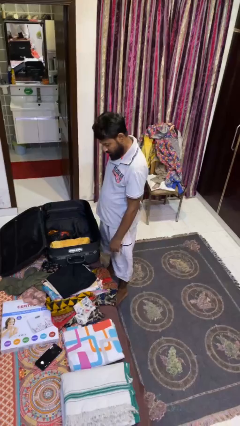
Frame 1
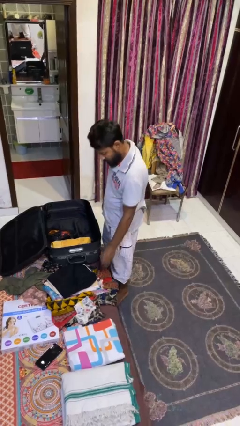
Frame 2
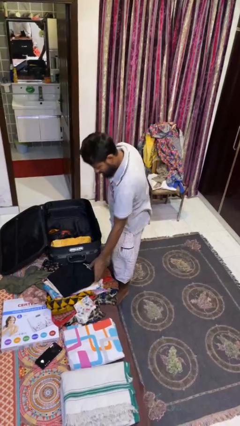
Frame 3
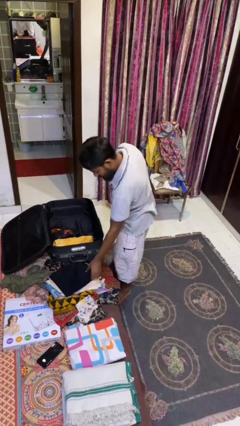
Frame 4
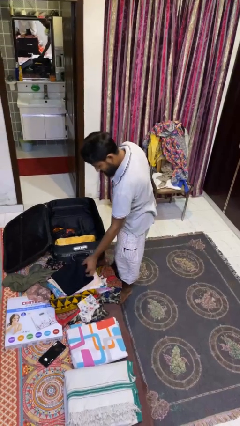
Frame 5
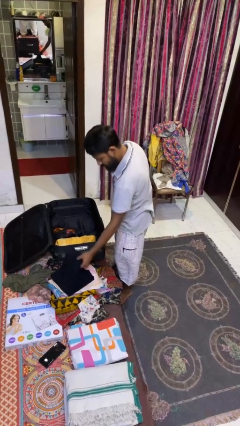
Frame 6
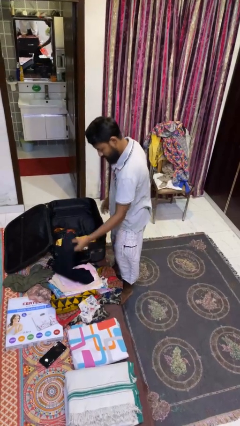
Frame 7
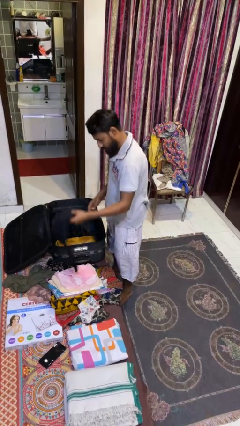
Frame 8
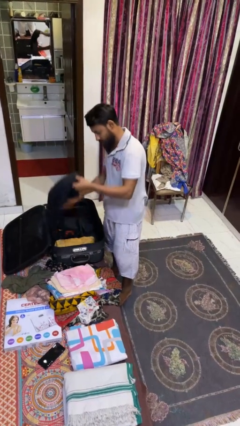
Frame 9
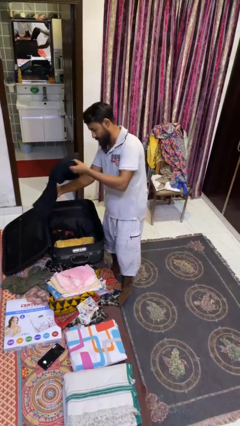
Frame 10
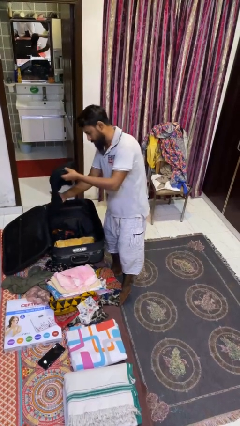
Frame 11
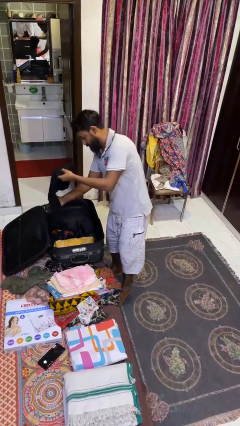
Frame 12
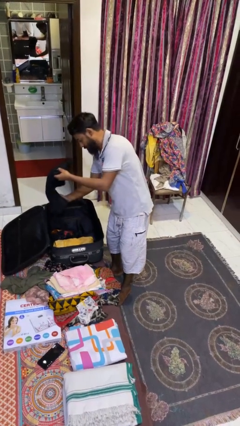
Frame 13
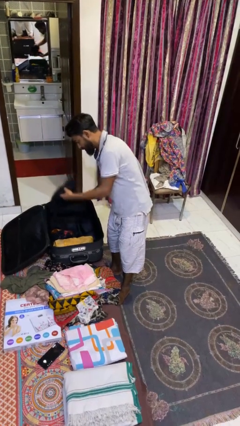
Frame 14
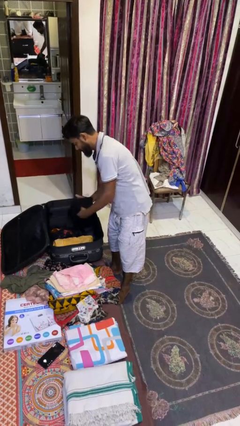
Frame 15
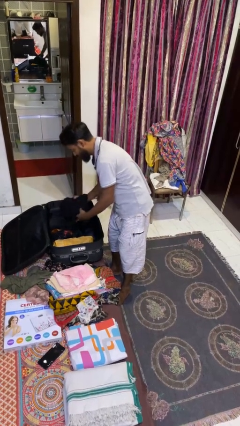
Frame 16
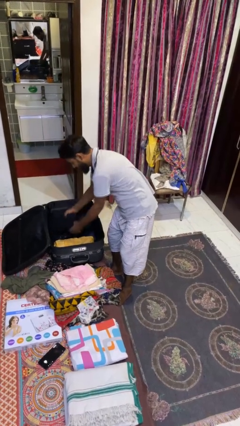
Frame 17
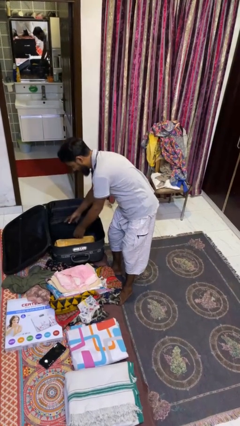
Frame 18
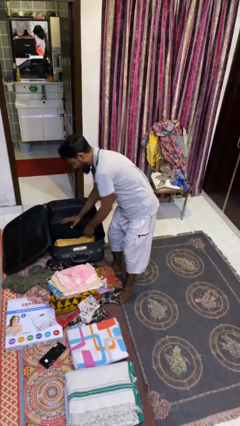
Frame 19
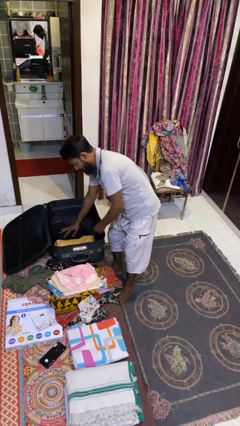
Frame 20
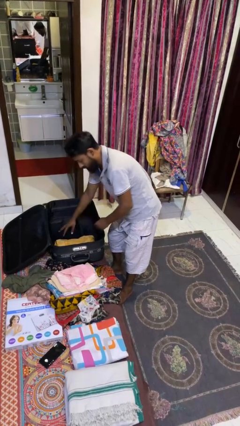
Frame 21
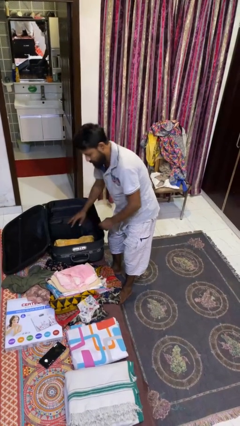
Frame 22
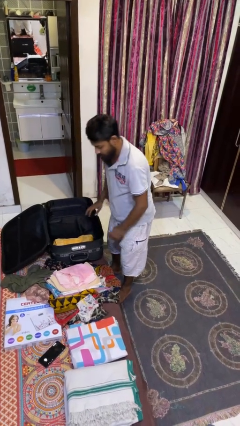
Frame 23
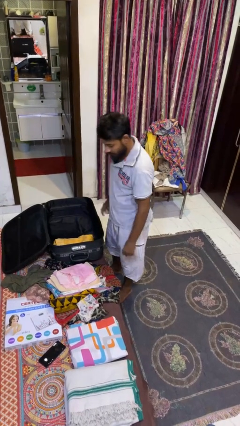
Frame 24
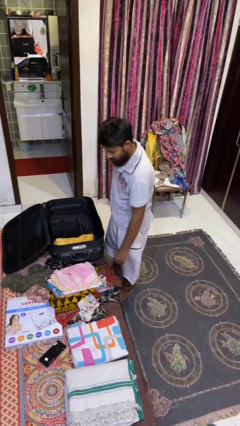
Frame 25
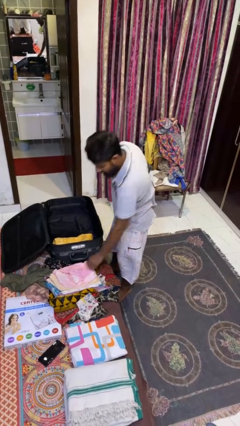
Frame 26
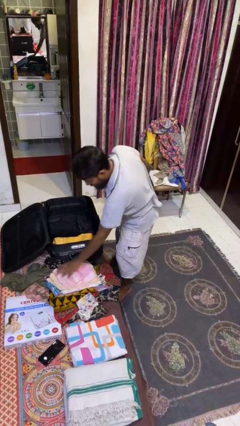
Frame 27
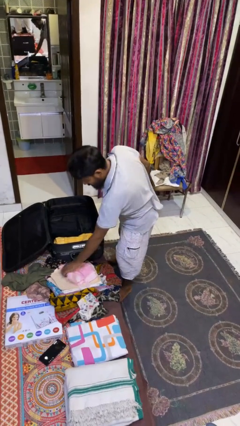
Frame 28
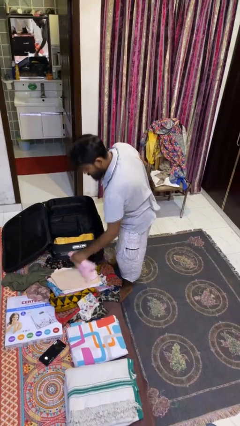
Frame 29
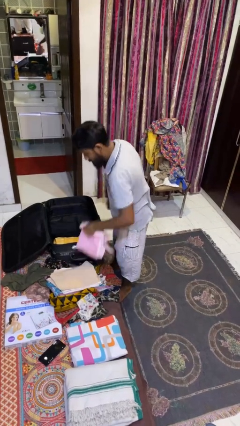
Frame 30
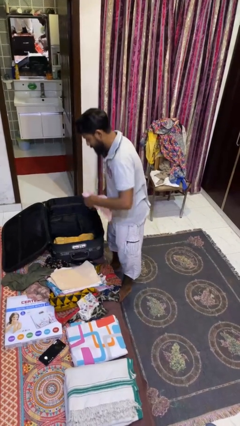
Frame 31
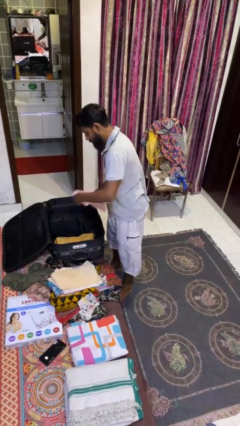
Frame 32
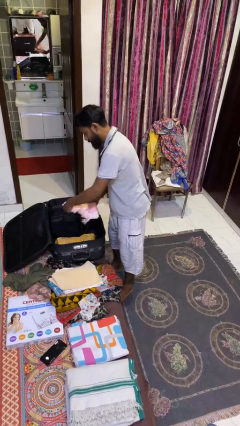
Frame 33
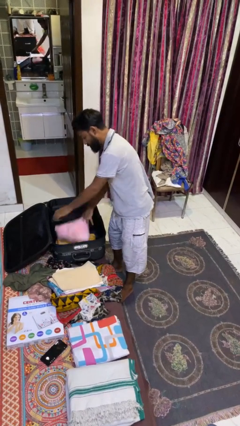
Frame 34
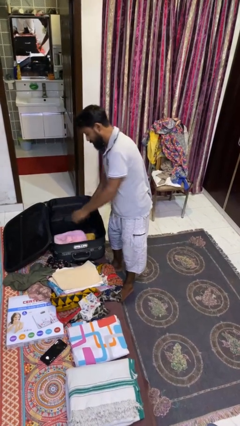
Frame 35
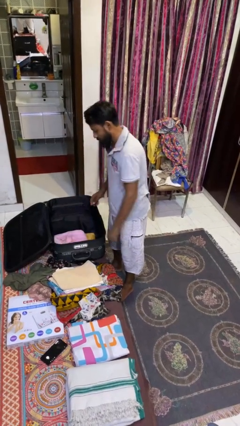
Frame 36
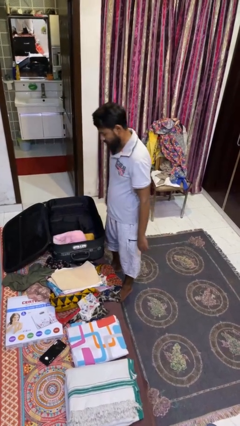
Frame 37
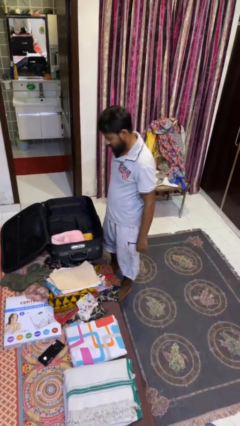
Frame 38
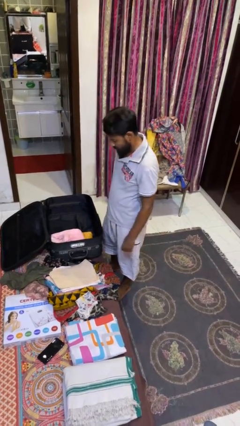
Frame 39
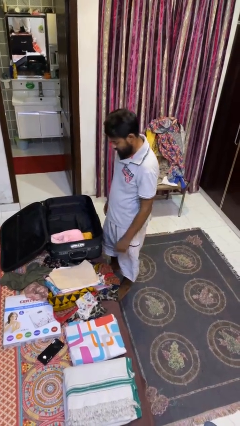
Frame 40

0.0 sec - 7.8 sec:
person loads clothes into suitcase

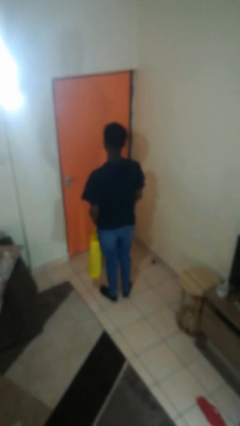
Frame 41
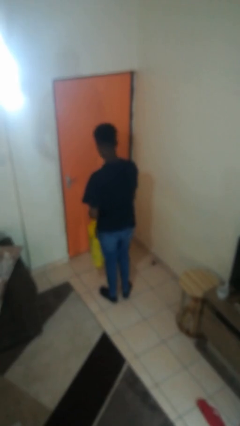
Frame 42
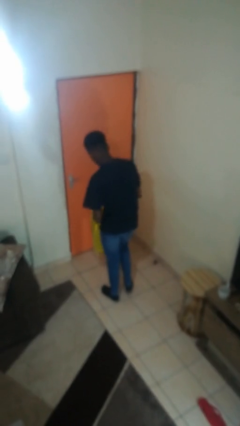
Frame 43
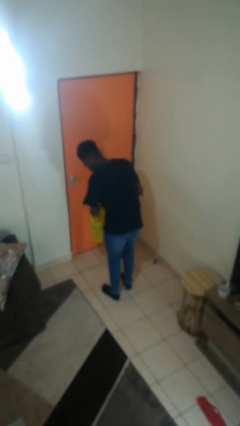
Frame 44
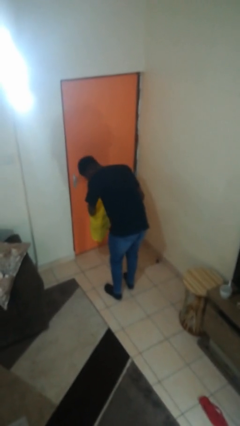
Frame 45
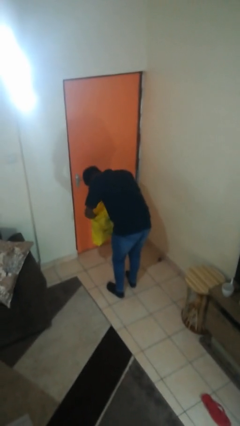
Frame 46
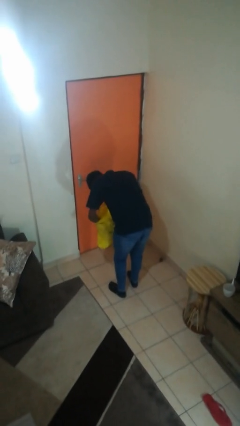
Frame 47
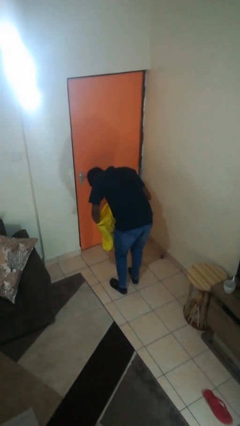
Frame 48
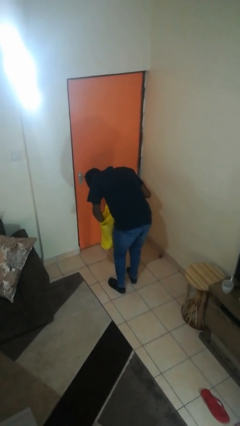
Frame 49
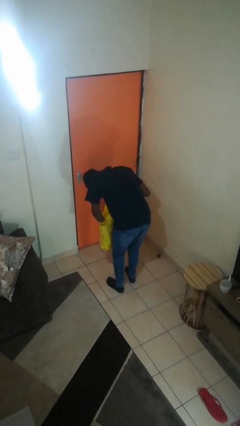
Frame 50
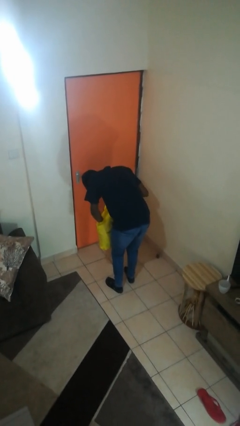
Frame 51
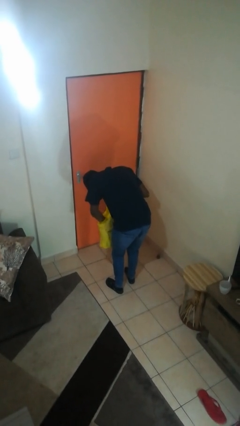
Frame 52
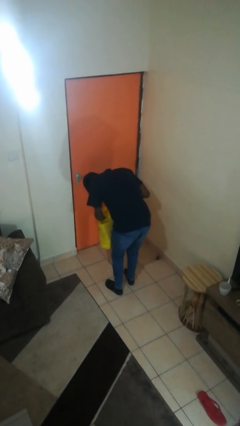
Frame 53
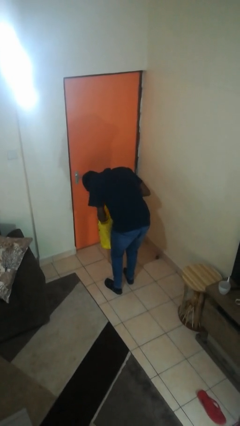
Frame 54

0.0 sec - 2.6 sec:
person searches in bag

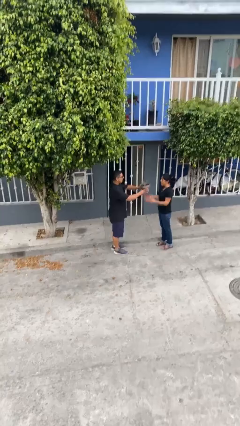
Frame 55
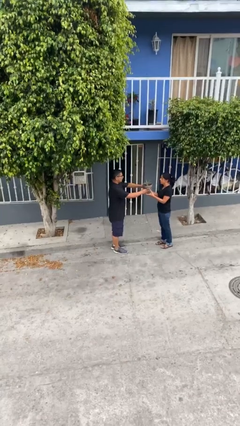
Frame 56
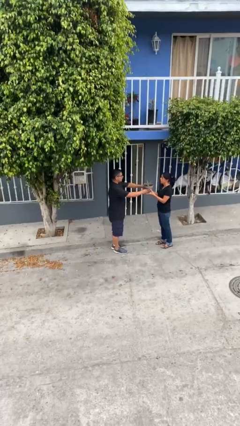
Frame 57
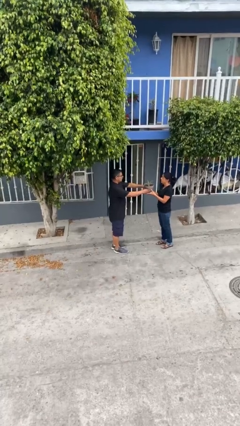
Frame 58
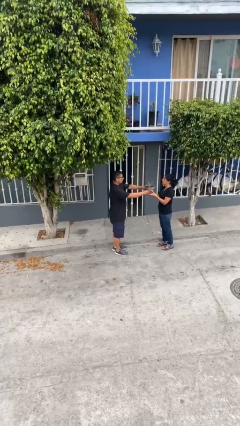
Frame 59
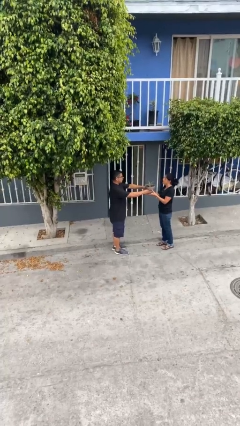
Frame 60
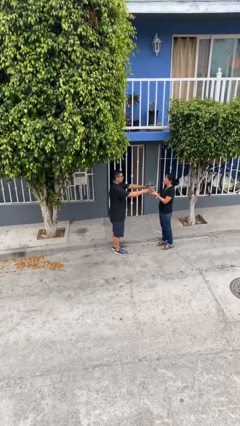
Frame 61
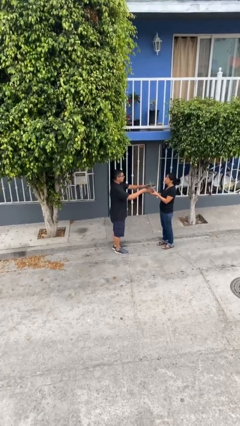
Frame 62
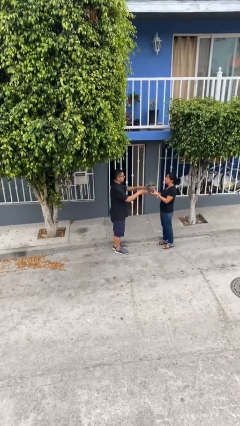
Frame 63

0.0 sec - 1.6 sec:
person transfers object to person

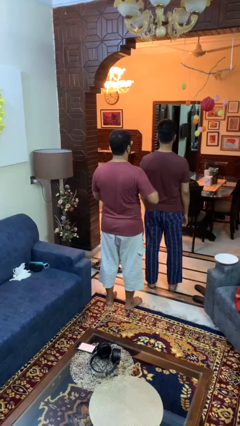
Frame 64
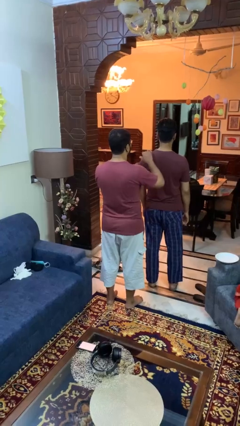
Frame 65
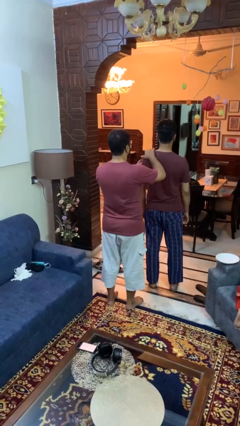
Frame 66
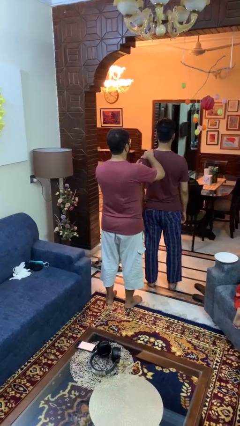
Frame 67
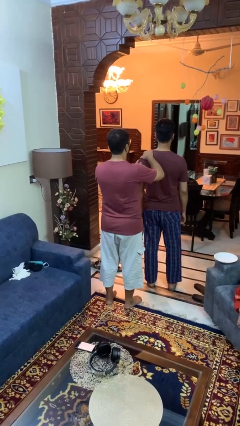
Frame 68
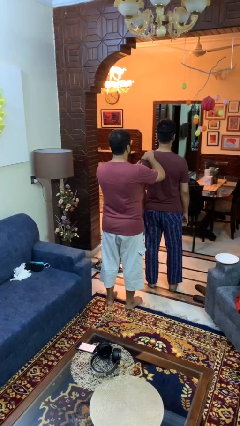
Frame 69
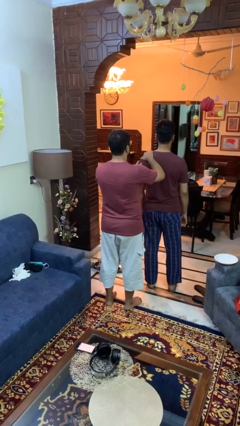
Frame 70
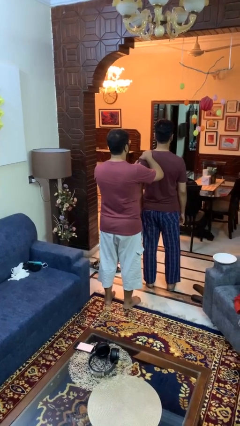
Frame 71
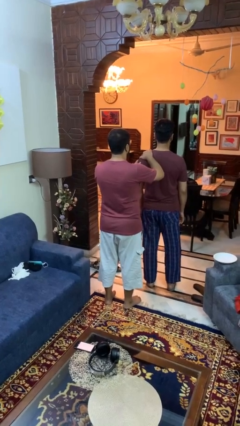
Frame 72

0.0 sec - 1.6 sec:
person grabs person by shoulder

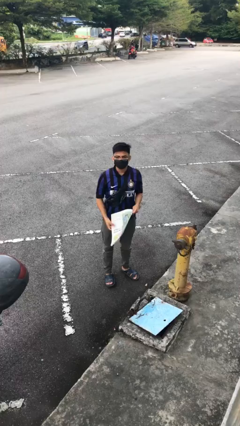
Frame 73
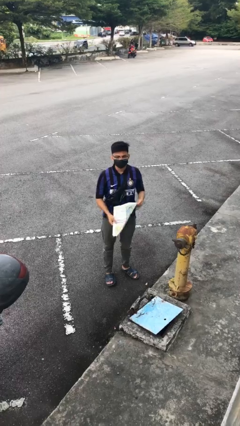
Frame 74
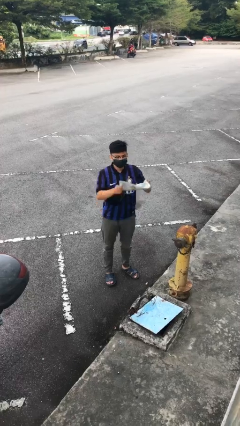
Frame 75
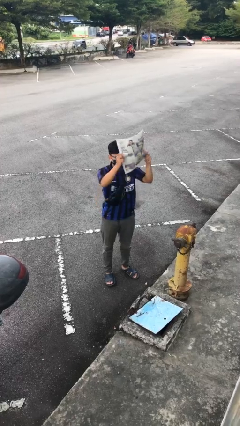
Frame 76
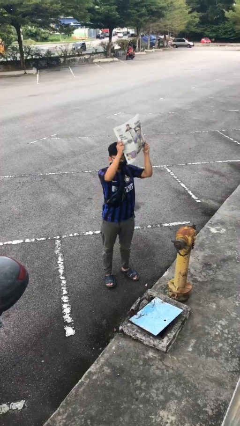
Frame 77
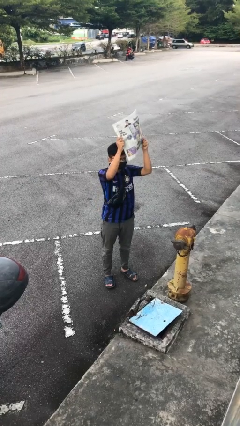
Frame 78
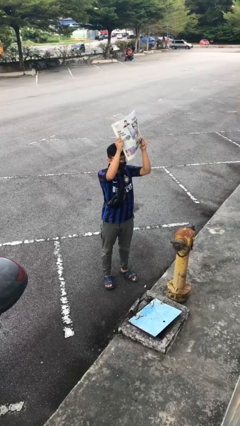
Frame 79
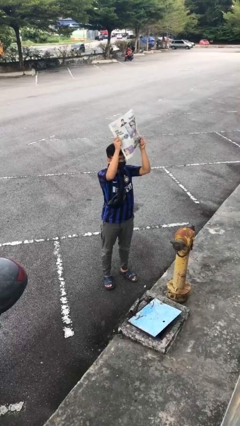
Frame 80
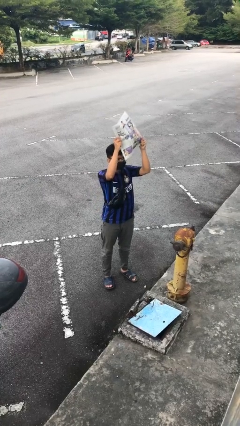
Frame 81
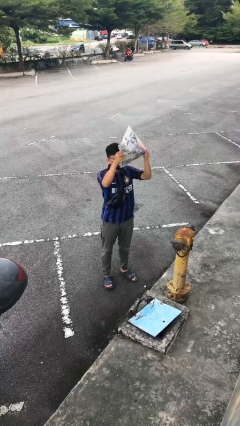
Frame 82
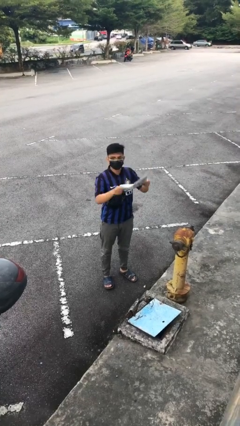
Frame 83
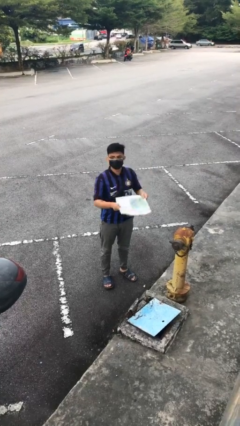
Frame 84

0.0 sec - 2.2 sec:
person holds object above head

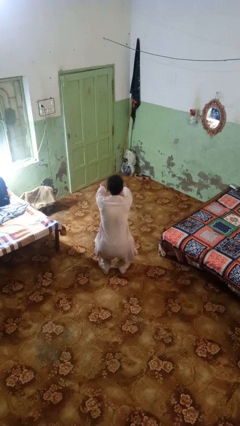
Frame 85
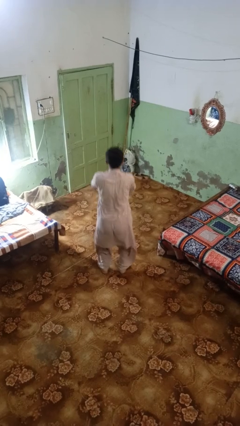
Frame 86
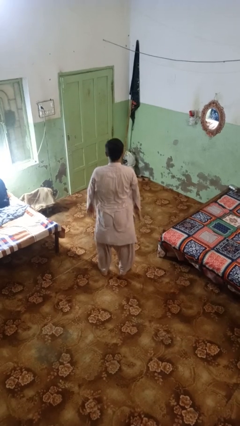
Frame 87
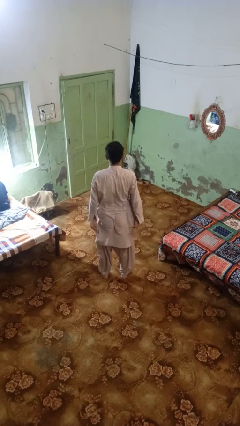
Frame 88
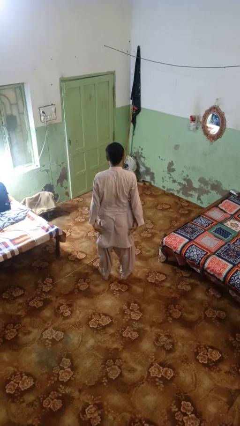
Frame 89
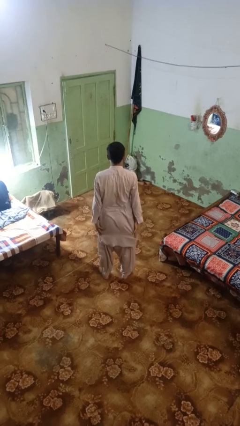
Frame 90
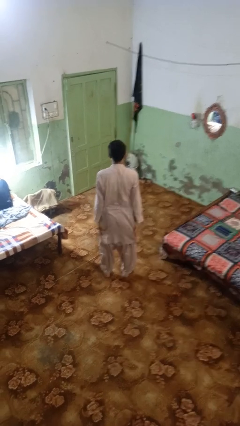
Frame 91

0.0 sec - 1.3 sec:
person stands up

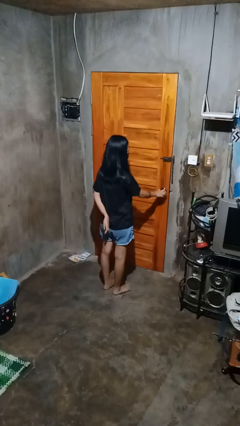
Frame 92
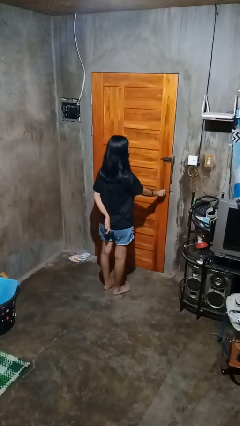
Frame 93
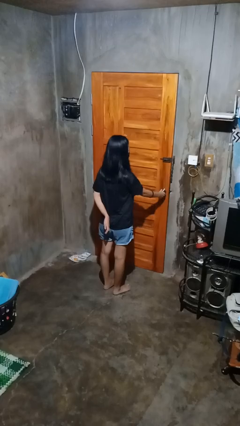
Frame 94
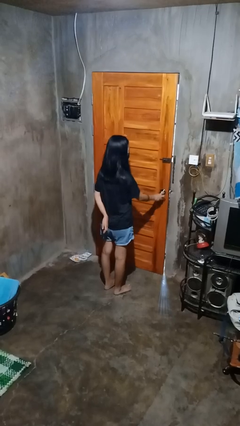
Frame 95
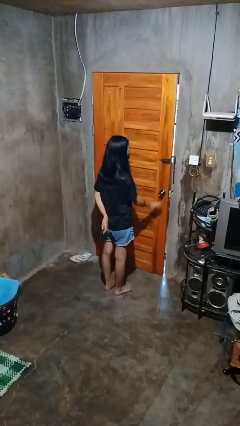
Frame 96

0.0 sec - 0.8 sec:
person opens facility door
